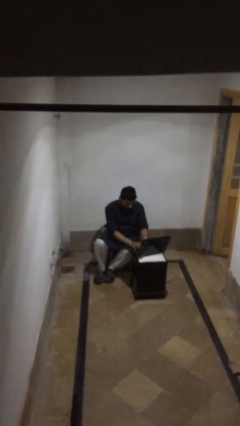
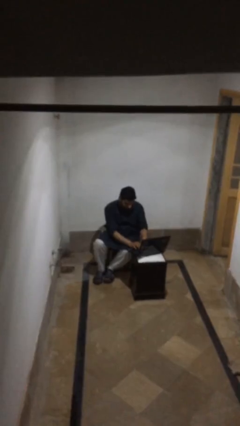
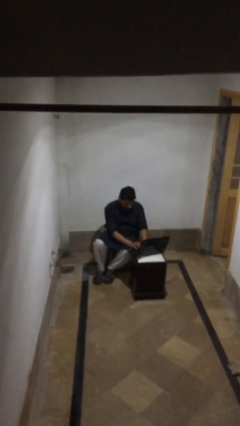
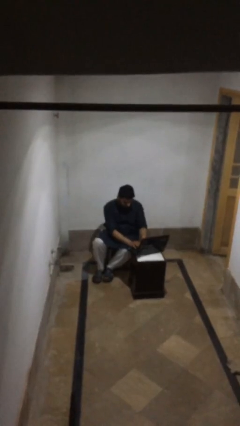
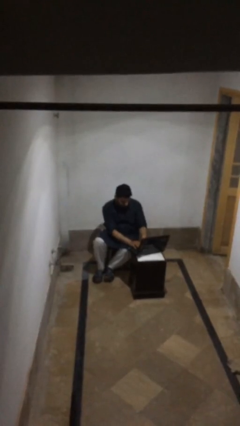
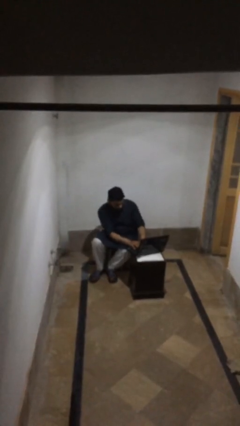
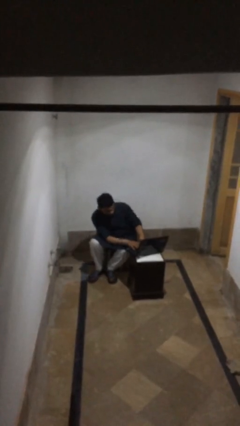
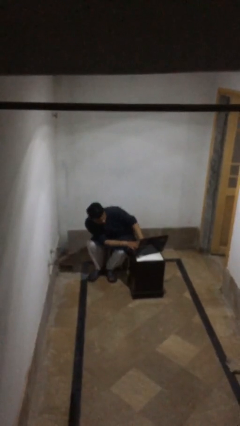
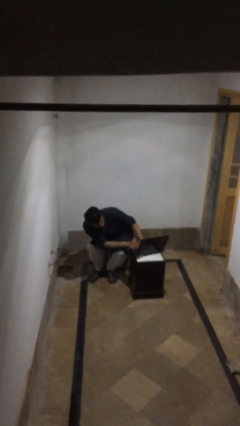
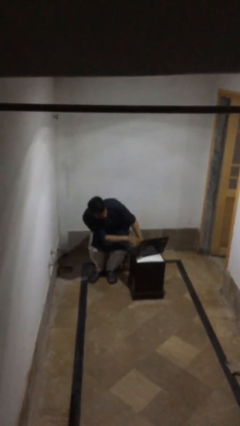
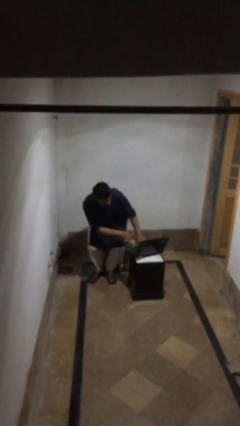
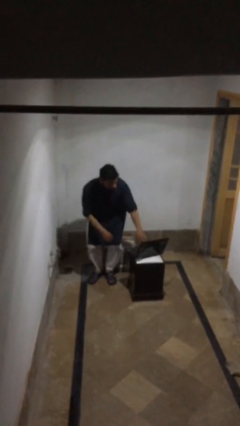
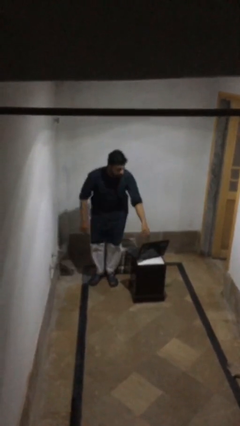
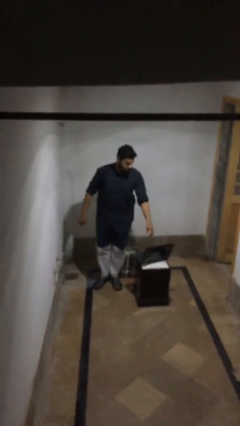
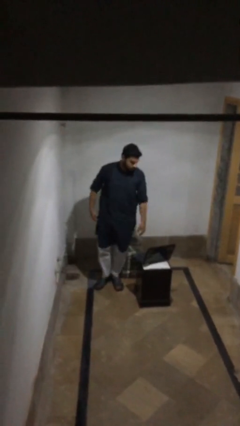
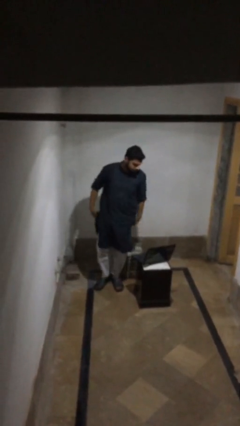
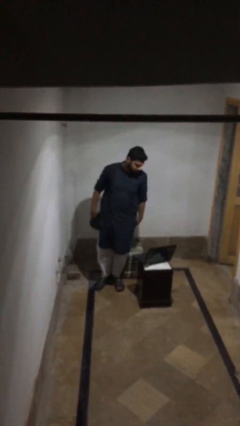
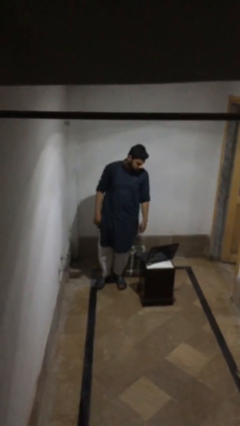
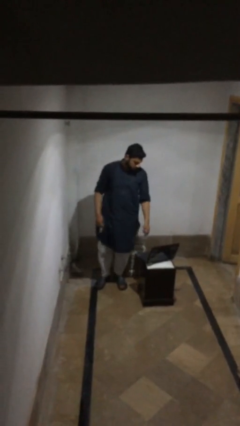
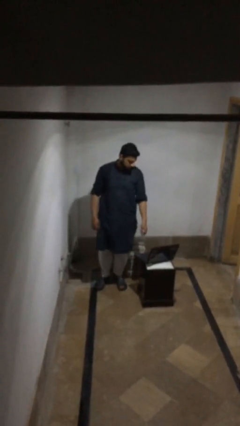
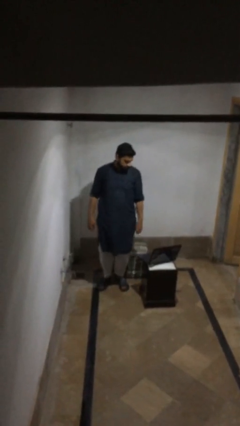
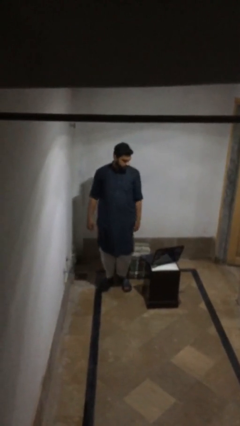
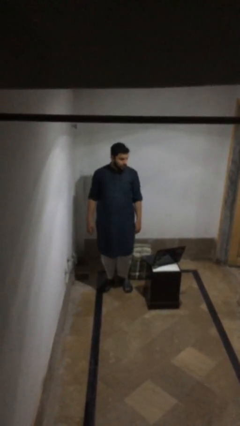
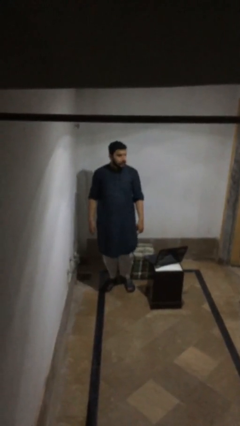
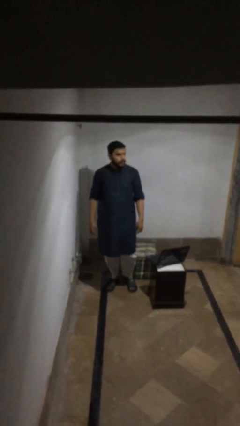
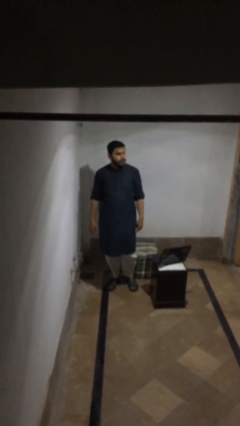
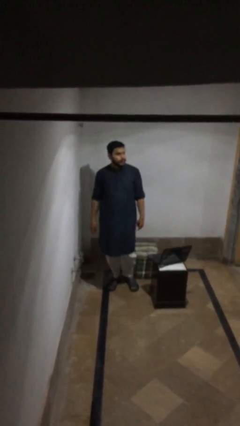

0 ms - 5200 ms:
person stands up

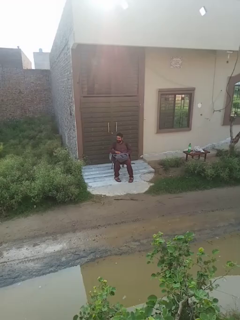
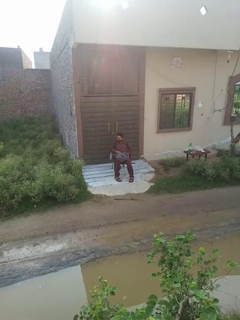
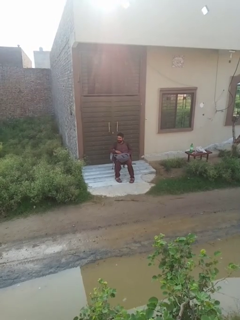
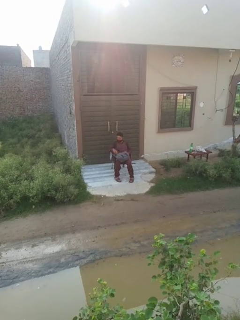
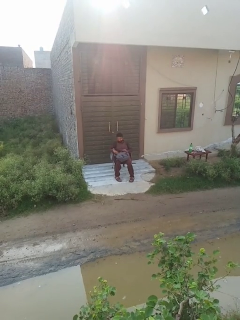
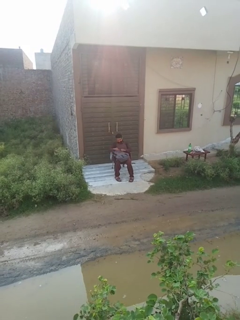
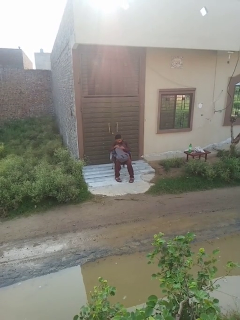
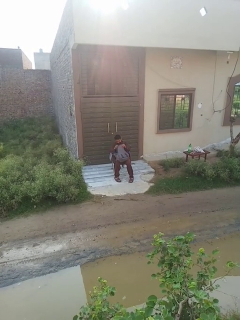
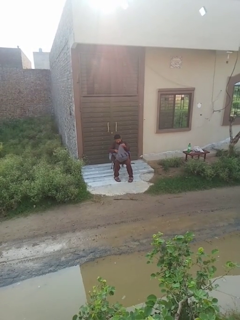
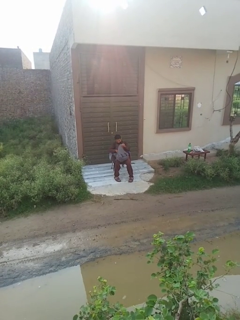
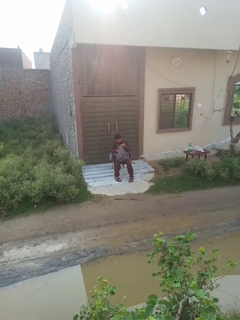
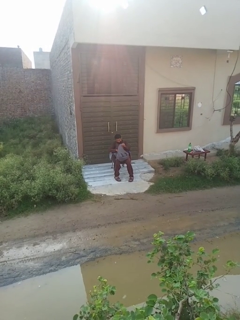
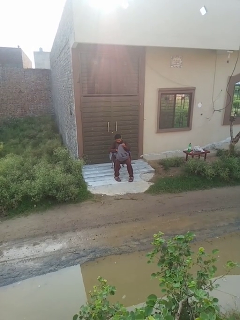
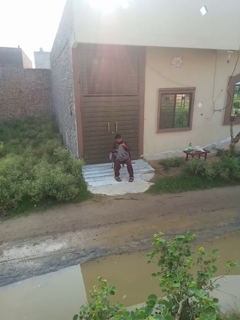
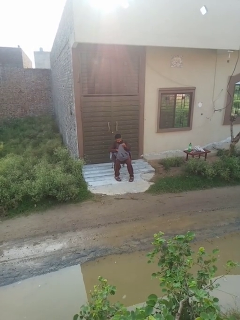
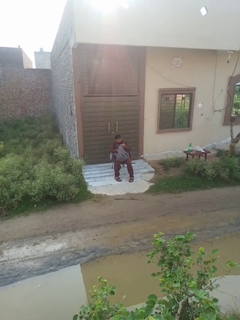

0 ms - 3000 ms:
person searches in backpack

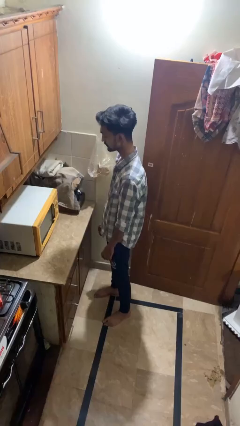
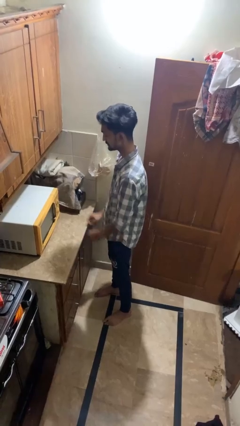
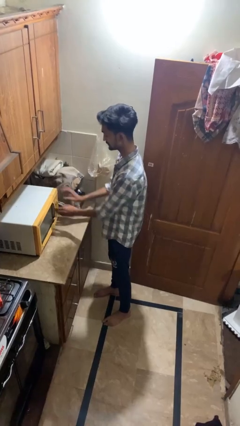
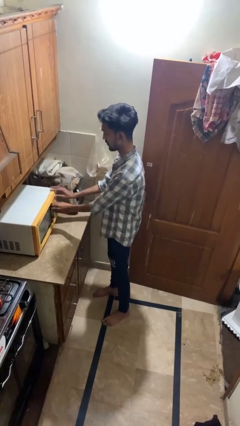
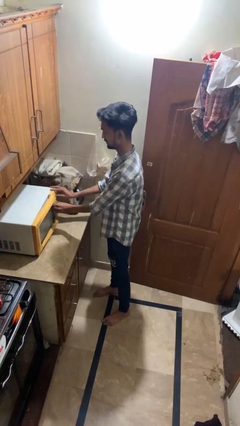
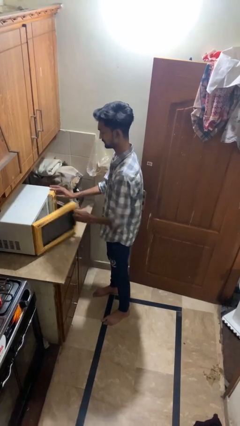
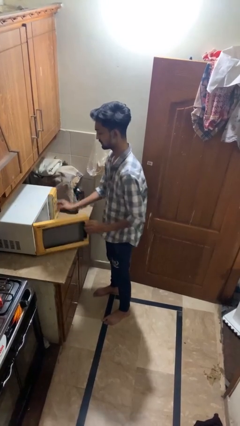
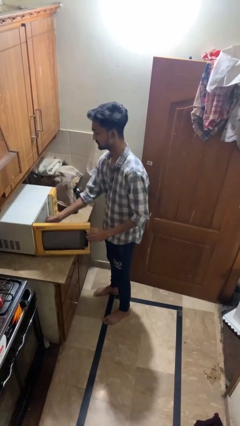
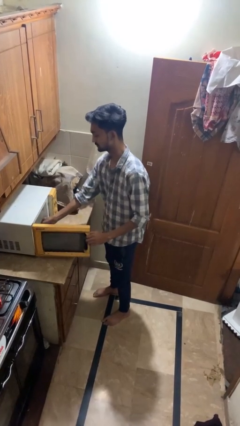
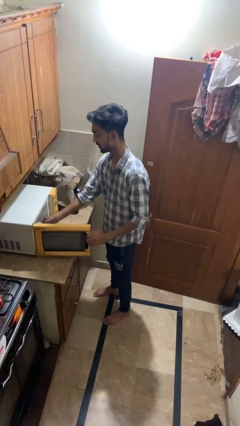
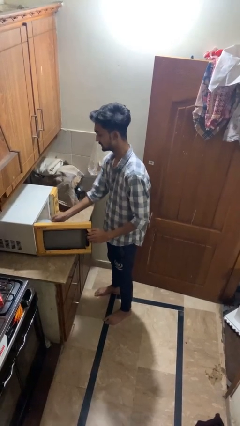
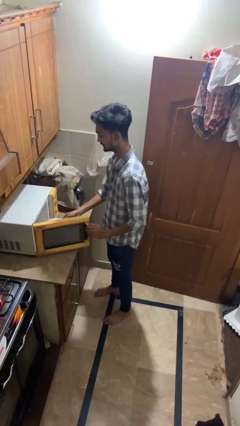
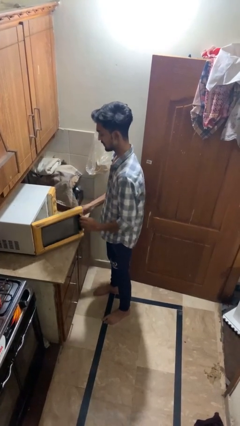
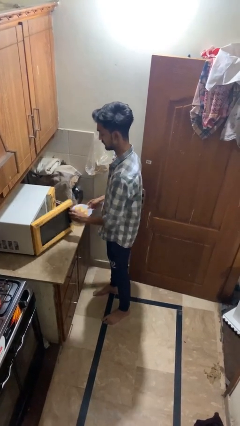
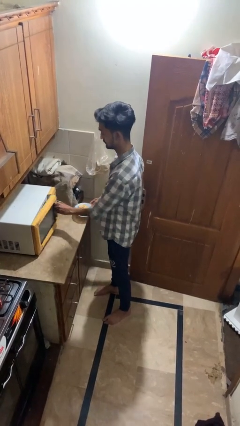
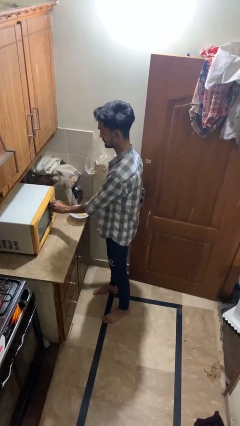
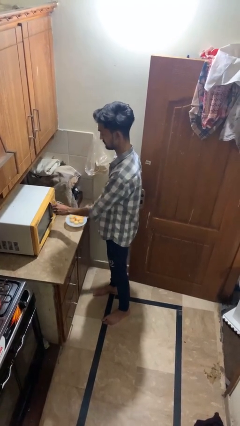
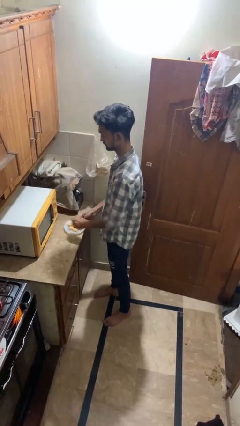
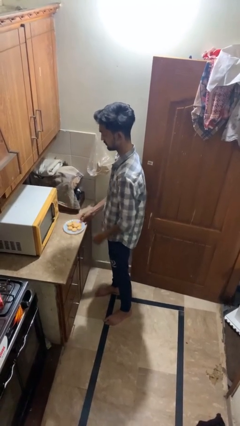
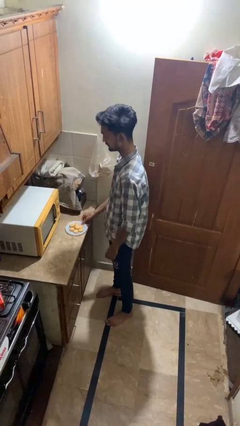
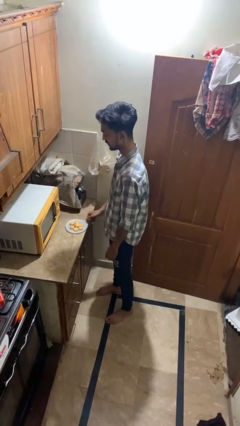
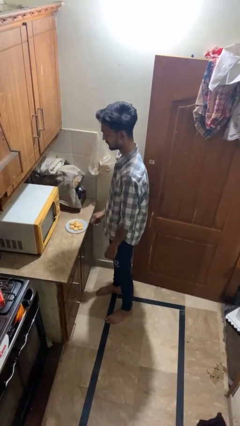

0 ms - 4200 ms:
person takes object from microwave

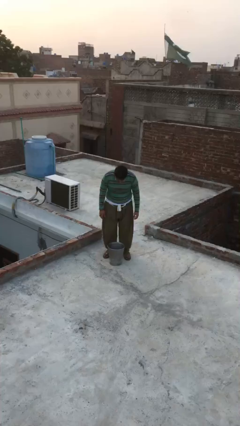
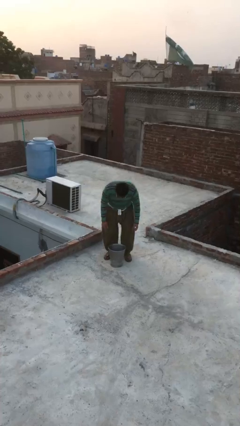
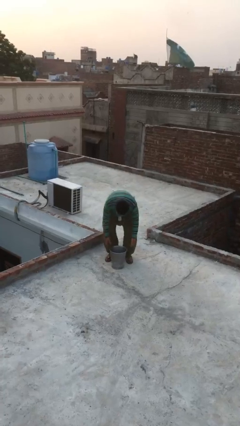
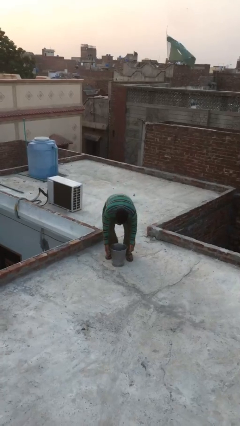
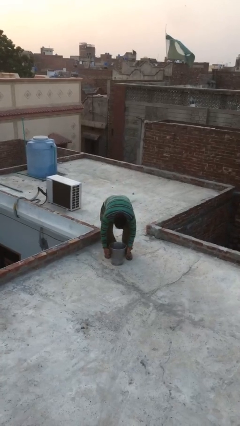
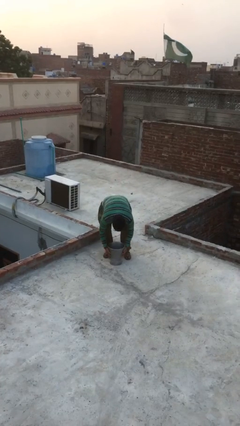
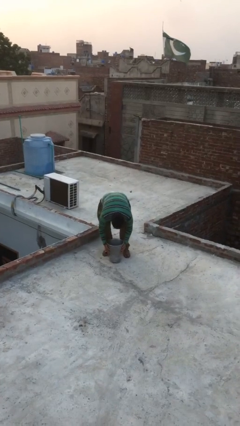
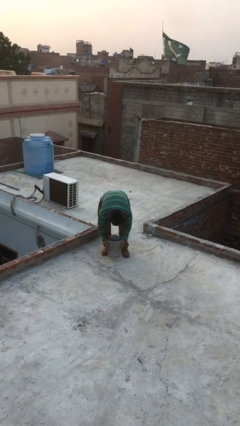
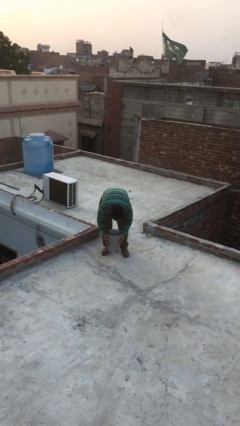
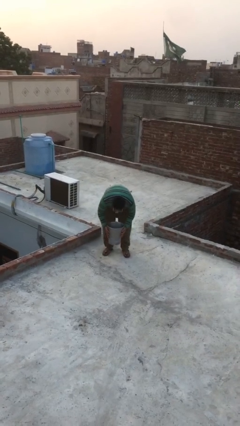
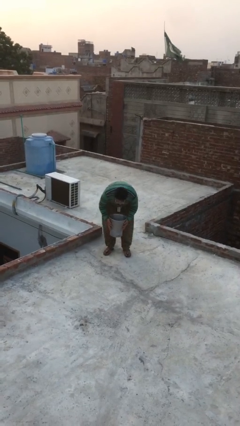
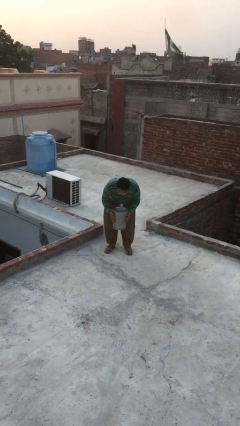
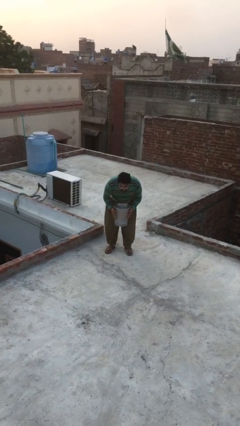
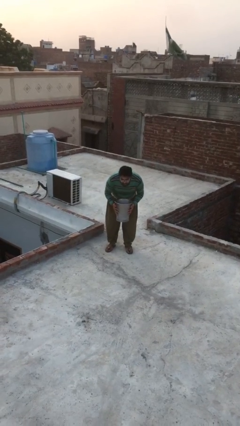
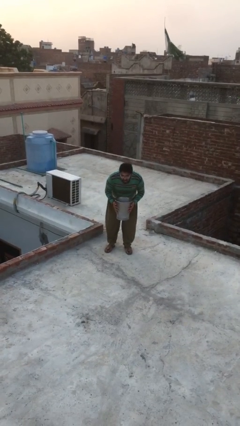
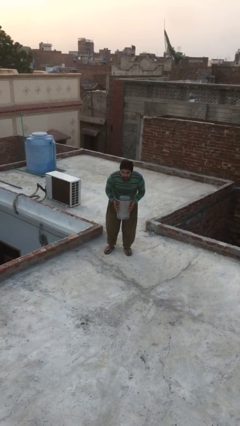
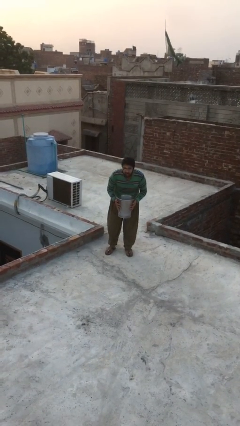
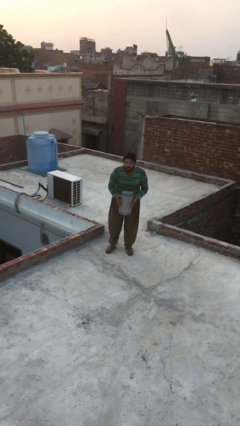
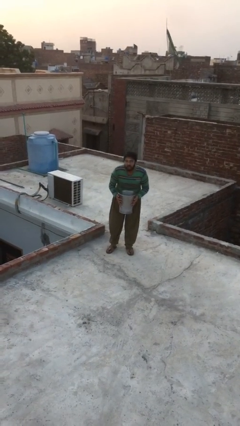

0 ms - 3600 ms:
person picks up object from floor

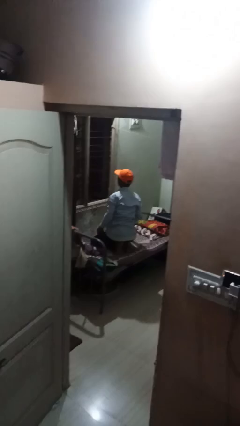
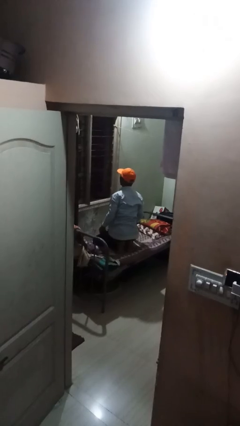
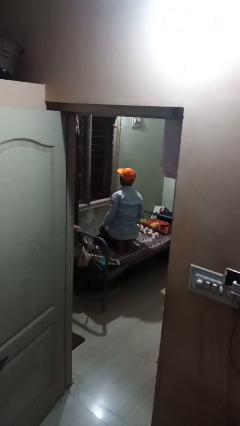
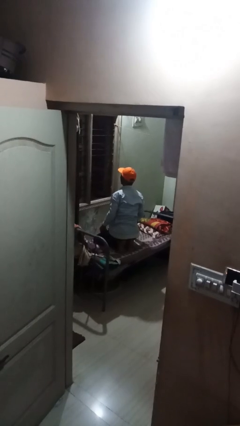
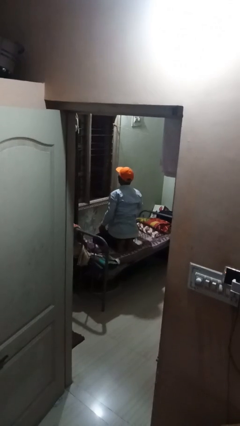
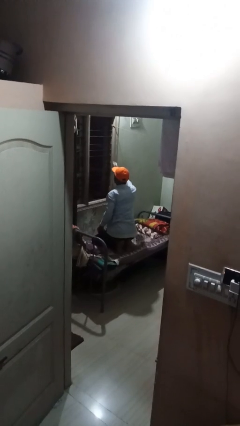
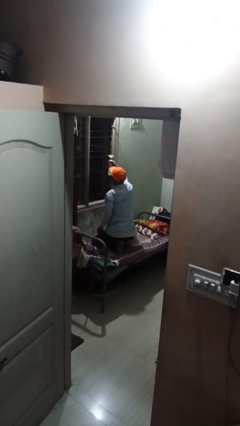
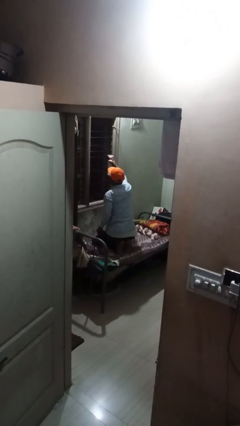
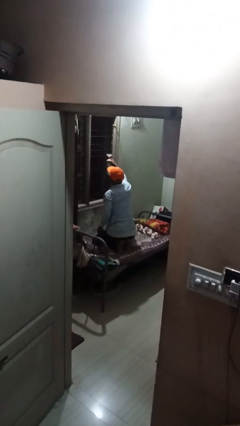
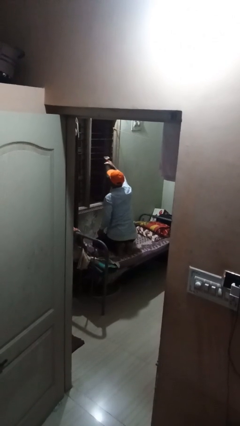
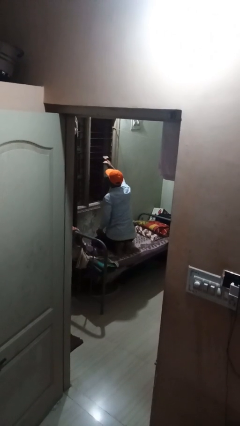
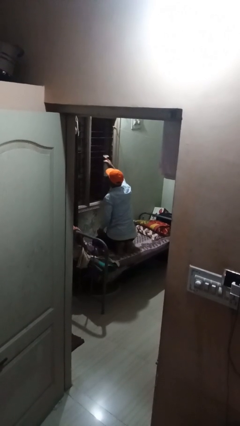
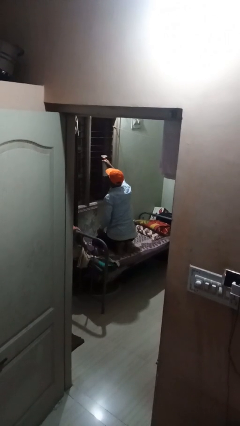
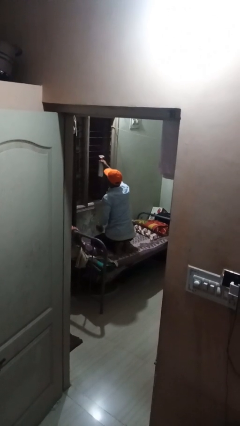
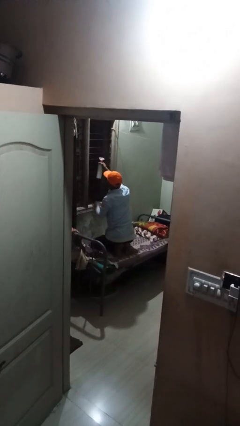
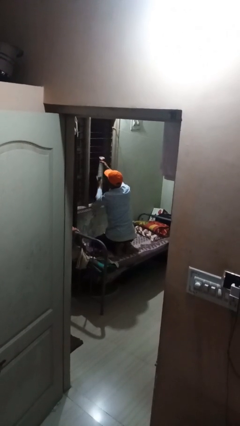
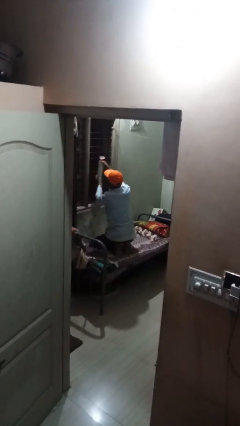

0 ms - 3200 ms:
person sprays from bottle
